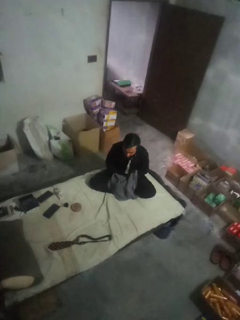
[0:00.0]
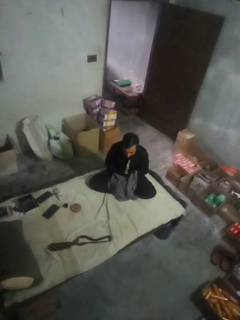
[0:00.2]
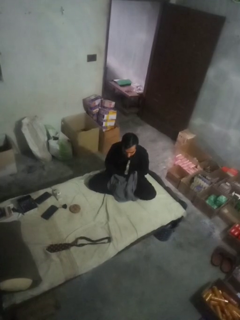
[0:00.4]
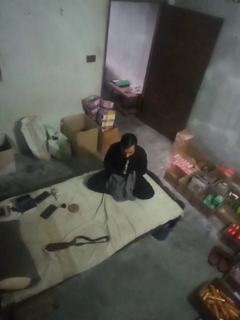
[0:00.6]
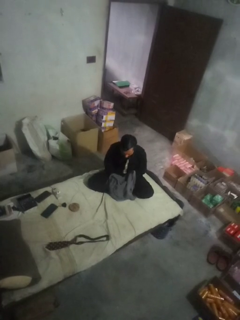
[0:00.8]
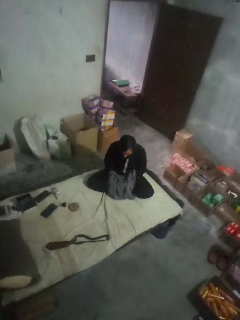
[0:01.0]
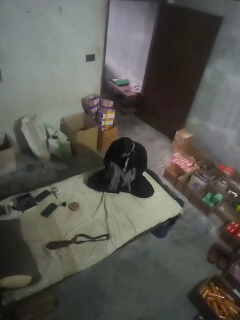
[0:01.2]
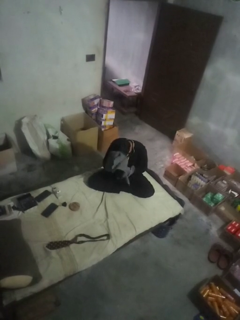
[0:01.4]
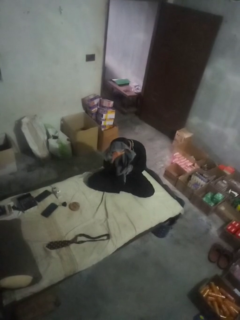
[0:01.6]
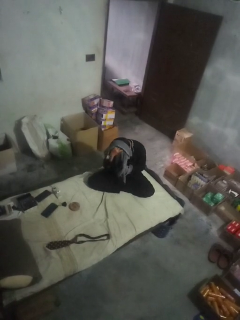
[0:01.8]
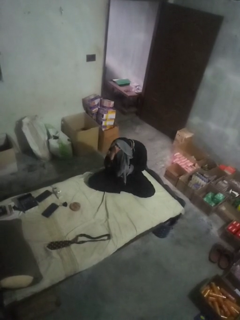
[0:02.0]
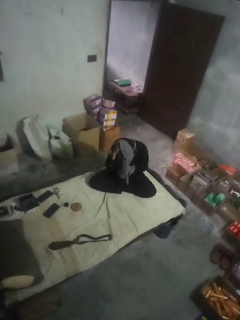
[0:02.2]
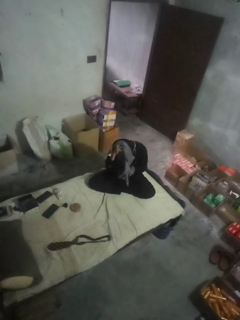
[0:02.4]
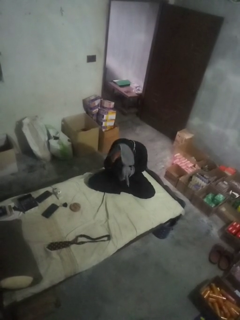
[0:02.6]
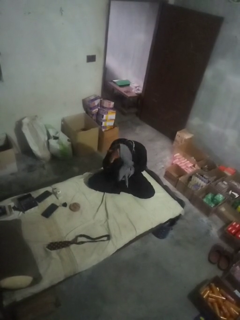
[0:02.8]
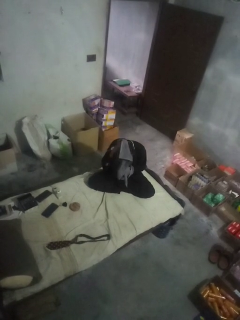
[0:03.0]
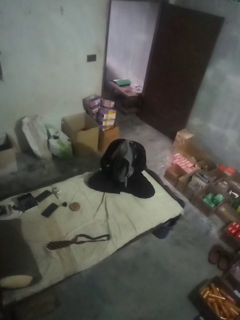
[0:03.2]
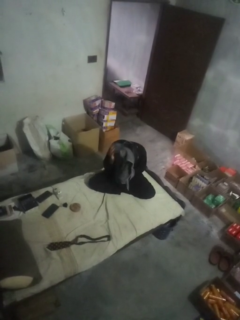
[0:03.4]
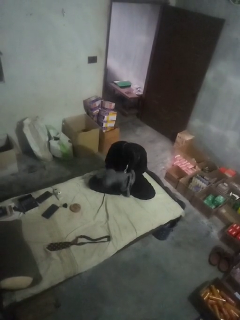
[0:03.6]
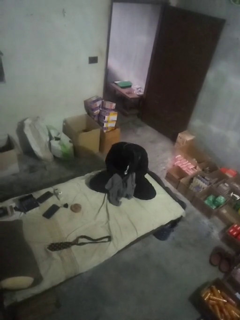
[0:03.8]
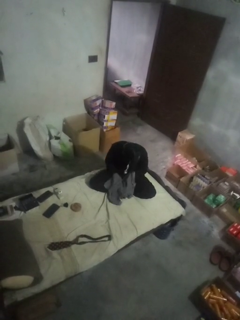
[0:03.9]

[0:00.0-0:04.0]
person dries hair with towel

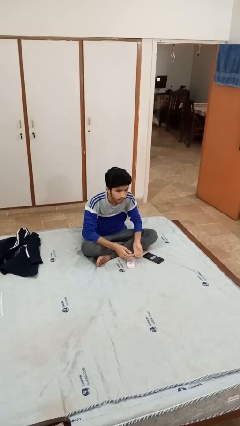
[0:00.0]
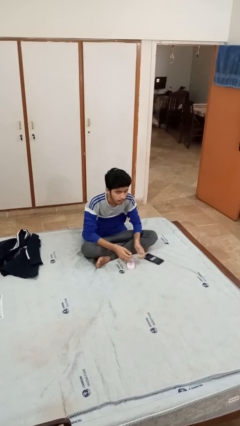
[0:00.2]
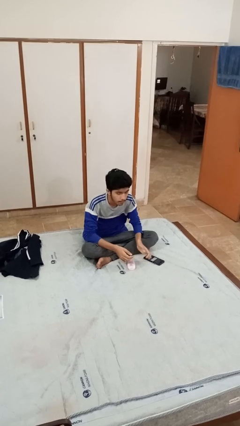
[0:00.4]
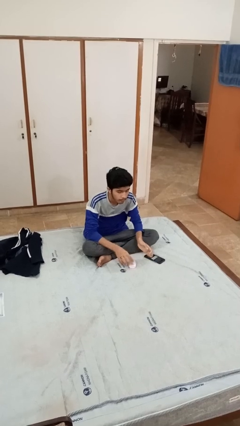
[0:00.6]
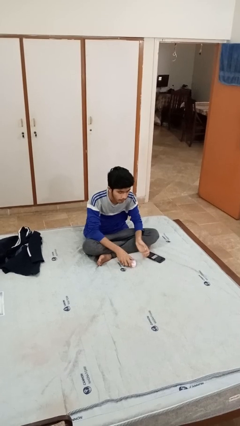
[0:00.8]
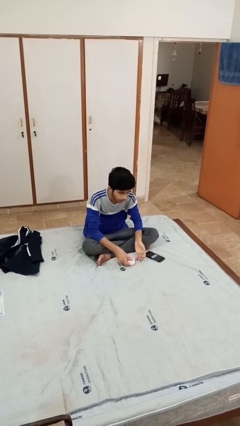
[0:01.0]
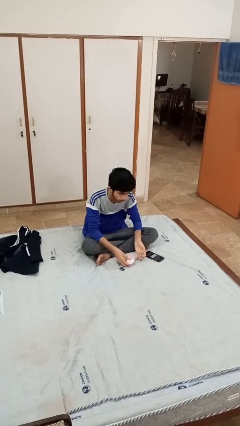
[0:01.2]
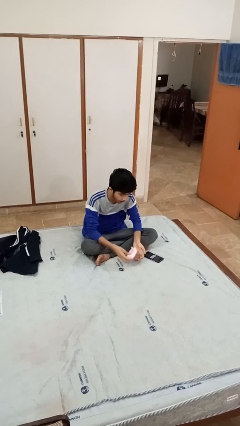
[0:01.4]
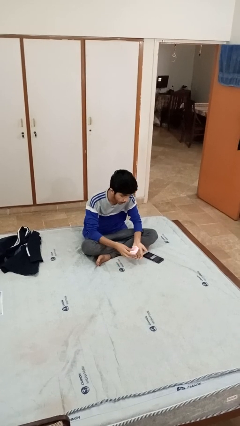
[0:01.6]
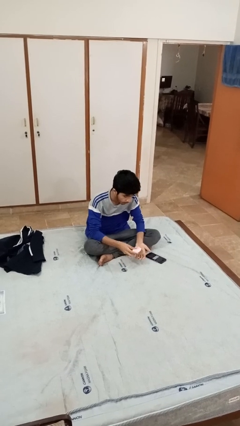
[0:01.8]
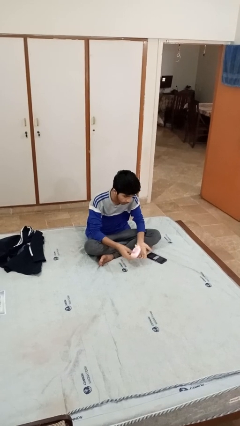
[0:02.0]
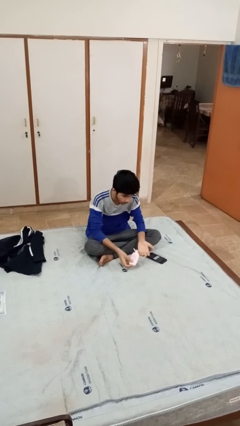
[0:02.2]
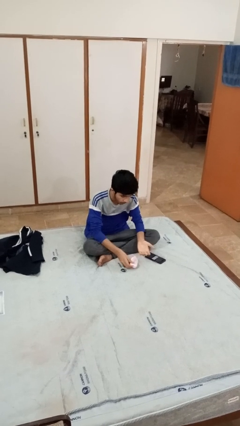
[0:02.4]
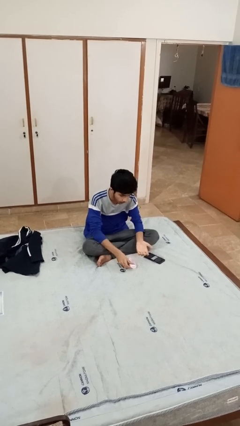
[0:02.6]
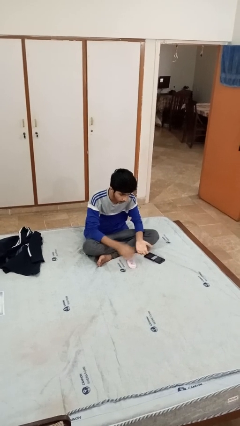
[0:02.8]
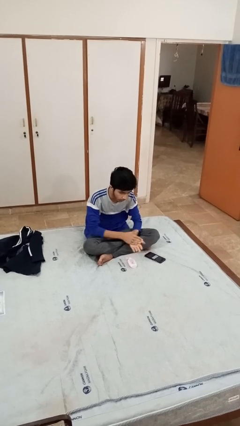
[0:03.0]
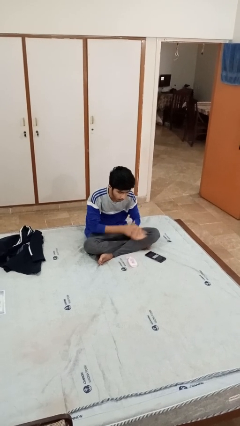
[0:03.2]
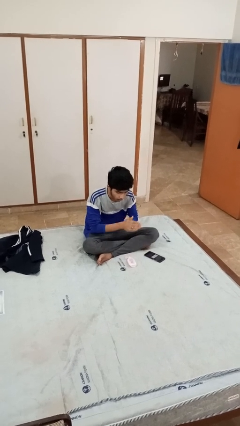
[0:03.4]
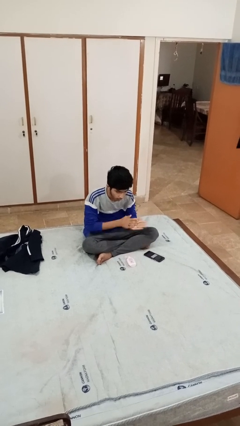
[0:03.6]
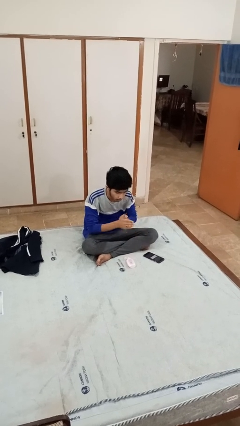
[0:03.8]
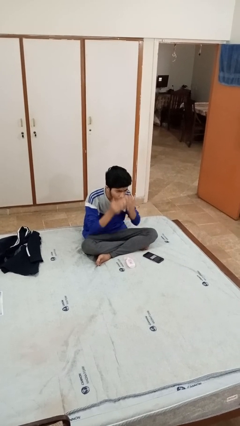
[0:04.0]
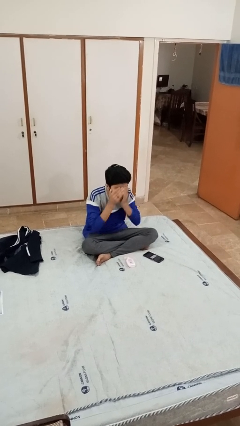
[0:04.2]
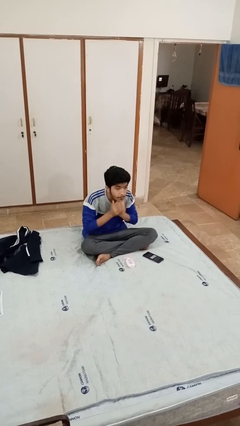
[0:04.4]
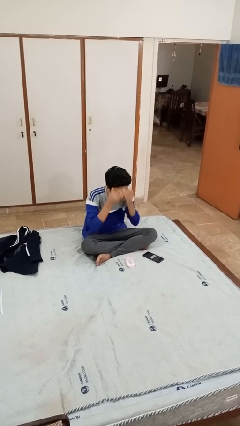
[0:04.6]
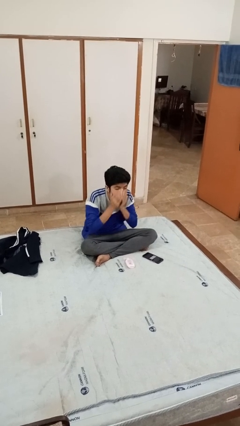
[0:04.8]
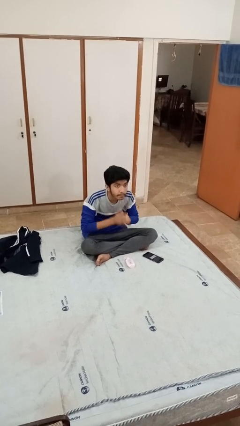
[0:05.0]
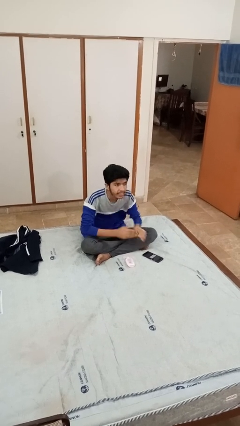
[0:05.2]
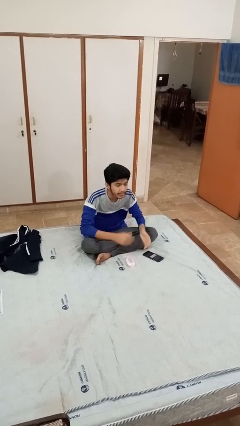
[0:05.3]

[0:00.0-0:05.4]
person applies facial moisturizer

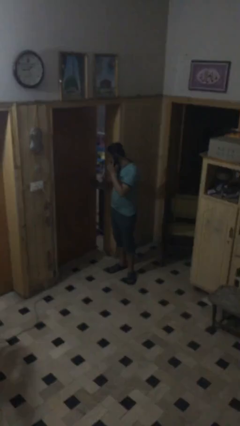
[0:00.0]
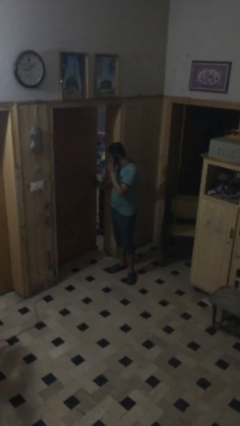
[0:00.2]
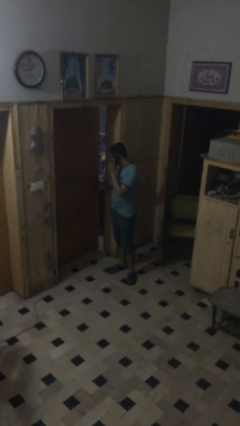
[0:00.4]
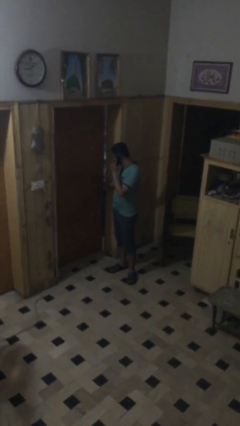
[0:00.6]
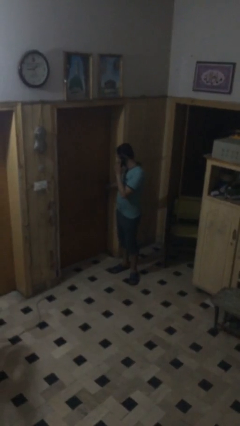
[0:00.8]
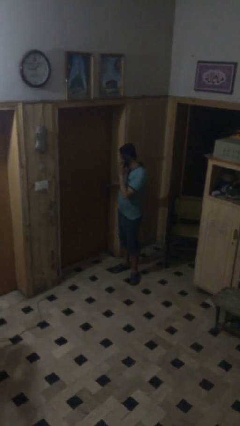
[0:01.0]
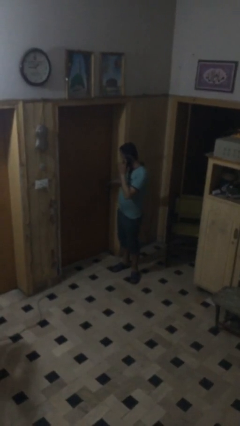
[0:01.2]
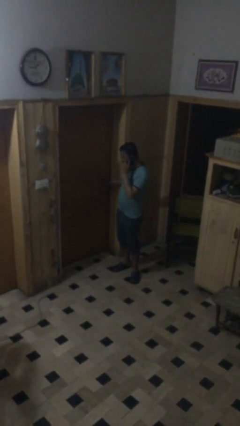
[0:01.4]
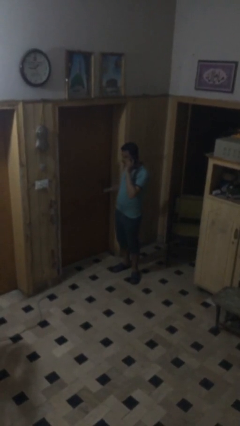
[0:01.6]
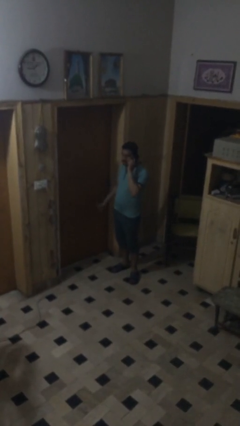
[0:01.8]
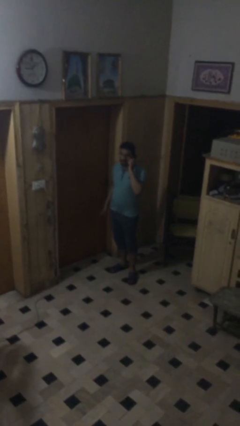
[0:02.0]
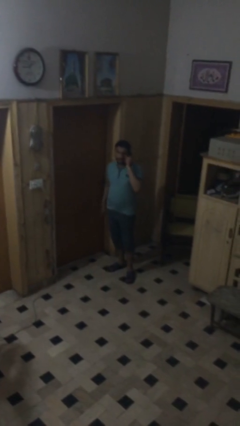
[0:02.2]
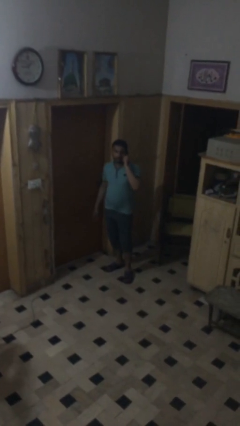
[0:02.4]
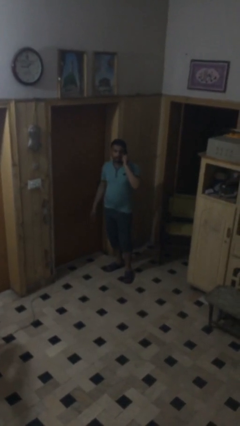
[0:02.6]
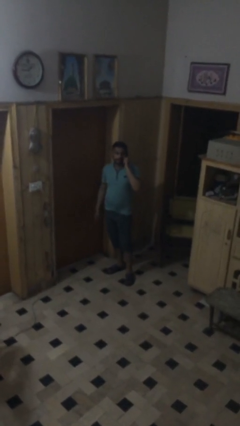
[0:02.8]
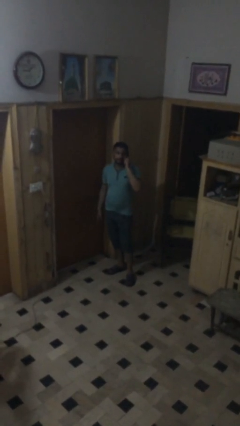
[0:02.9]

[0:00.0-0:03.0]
person closes facility door

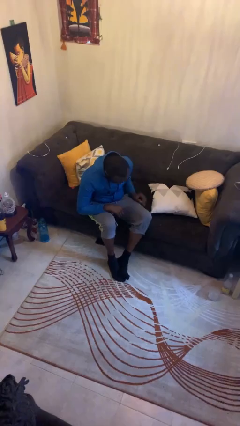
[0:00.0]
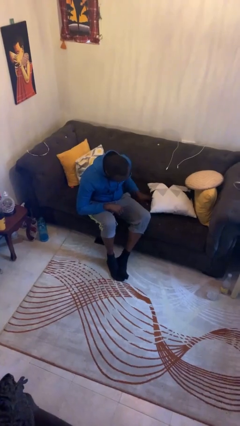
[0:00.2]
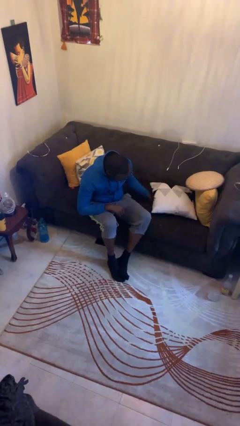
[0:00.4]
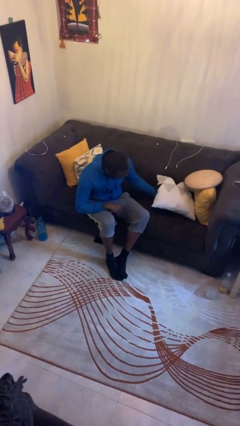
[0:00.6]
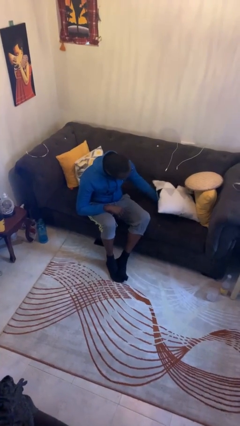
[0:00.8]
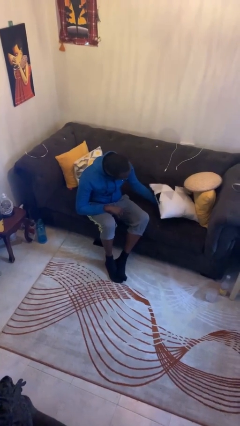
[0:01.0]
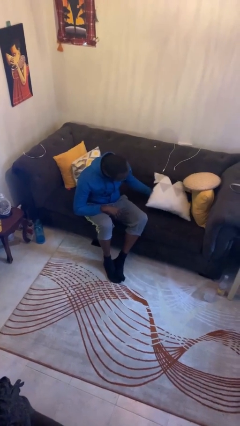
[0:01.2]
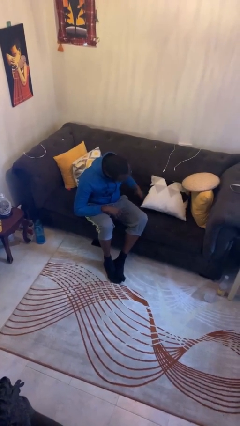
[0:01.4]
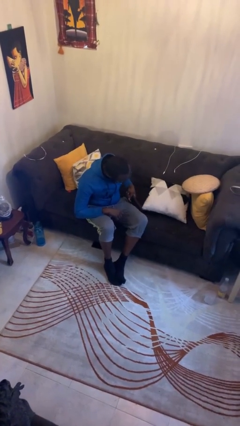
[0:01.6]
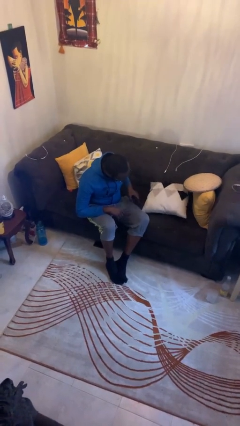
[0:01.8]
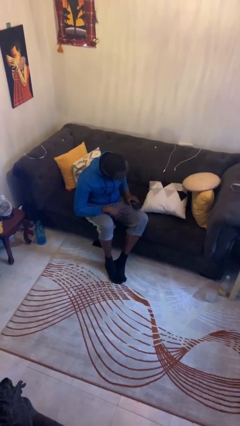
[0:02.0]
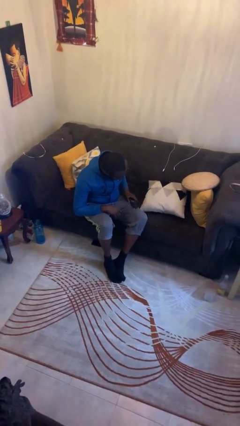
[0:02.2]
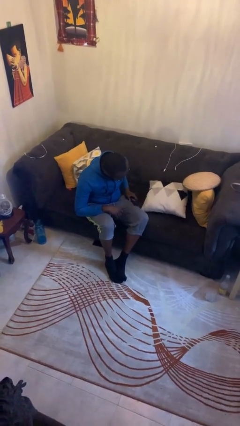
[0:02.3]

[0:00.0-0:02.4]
person searches in couch

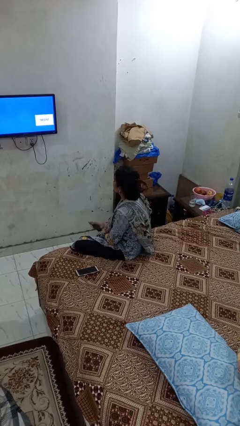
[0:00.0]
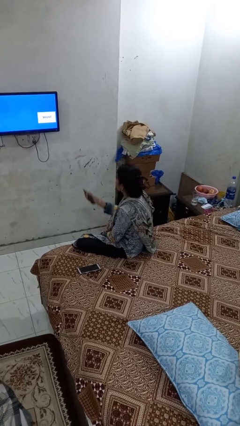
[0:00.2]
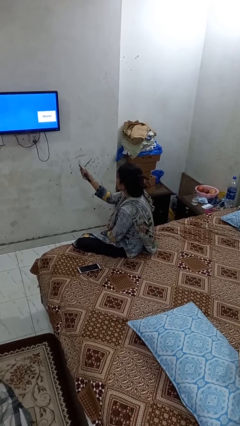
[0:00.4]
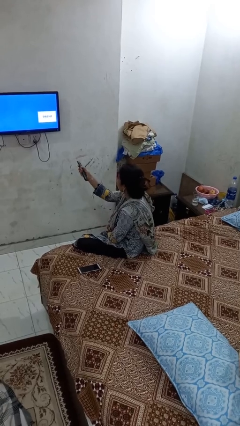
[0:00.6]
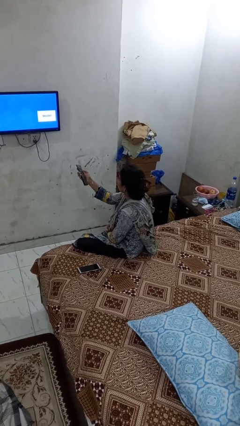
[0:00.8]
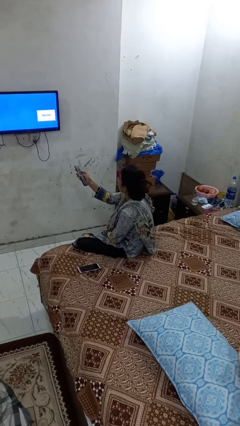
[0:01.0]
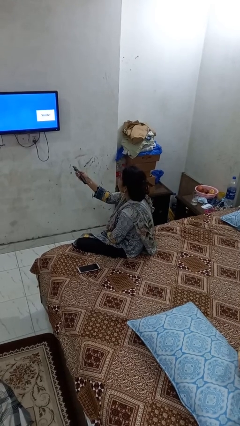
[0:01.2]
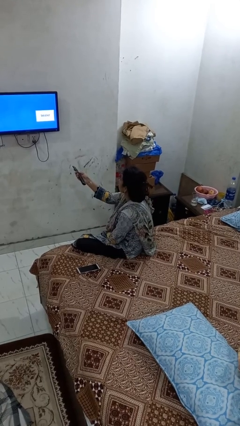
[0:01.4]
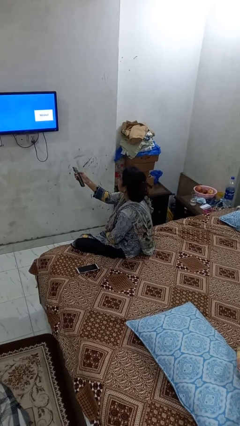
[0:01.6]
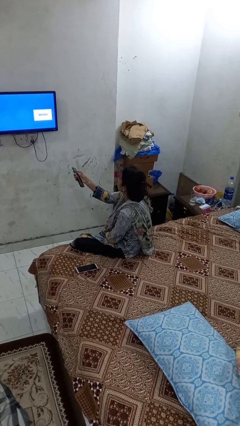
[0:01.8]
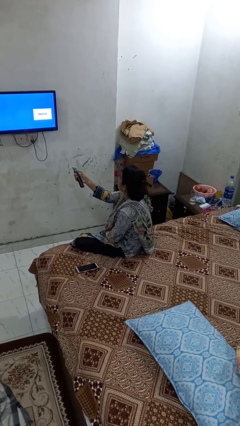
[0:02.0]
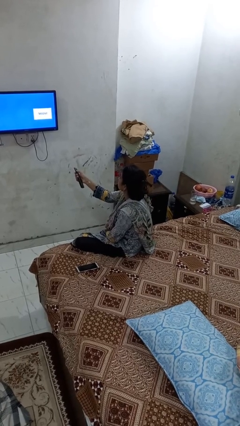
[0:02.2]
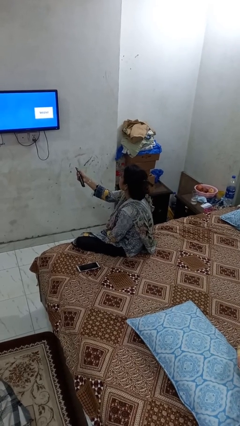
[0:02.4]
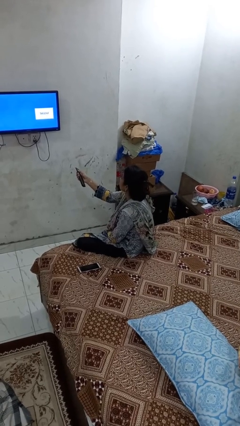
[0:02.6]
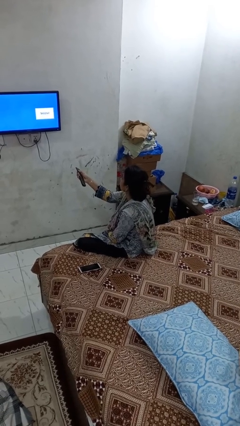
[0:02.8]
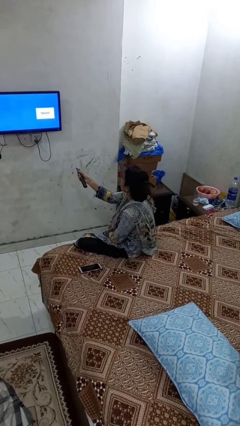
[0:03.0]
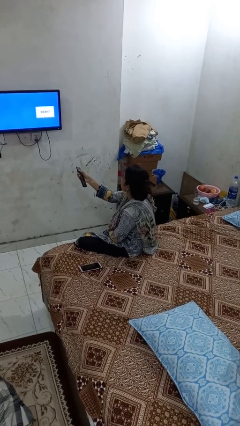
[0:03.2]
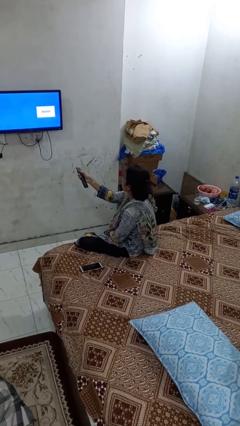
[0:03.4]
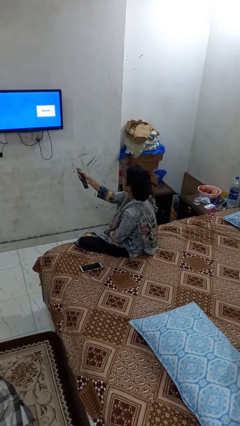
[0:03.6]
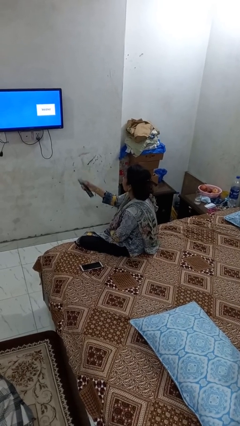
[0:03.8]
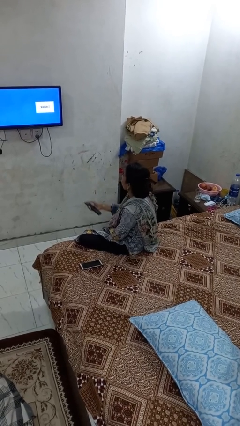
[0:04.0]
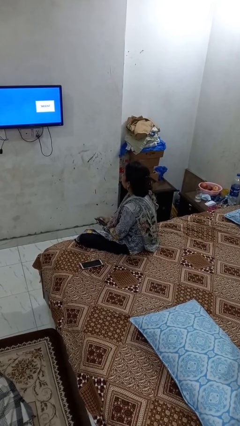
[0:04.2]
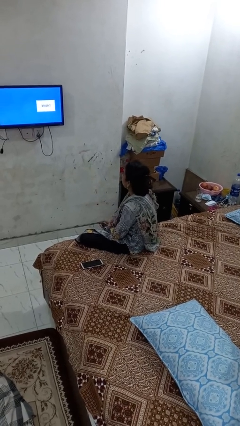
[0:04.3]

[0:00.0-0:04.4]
person uses television remote
